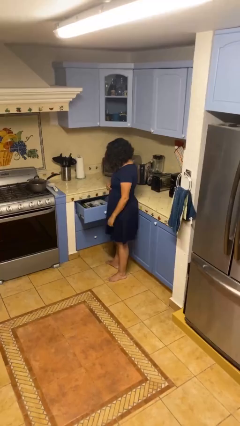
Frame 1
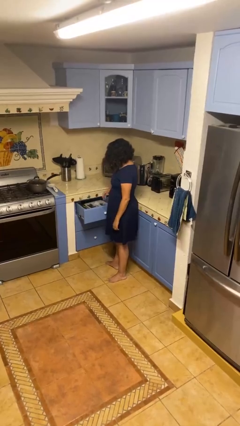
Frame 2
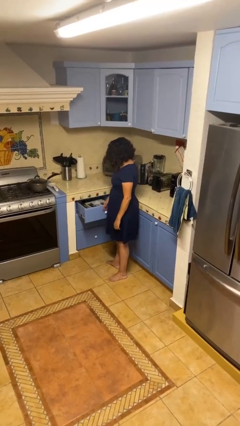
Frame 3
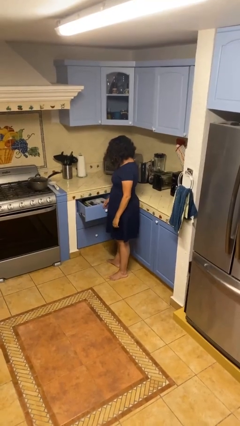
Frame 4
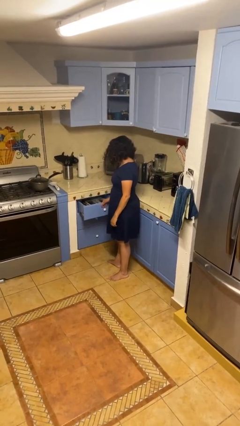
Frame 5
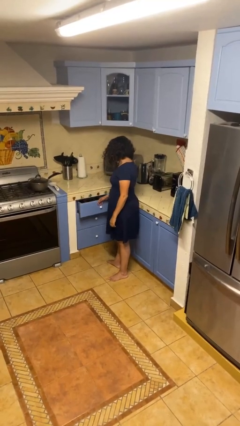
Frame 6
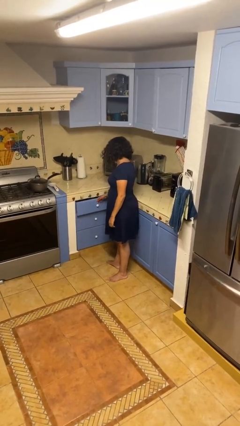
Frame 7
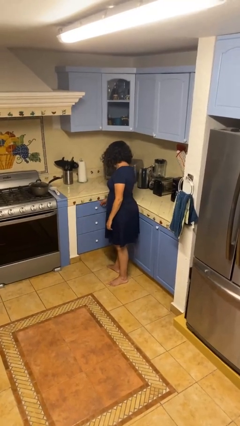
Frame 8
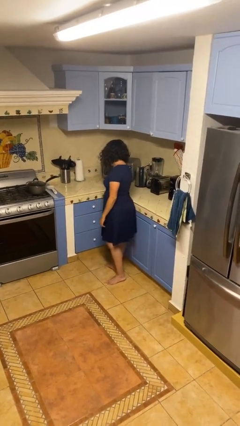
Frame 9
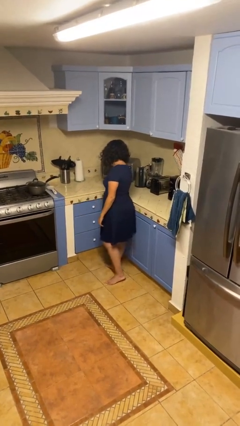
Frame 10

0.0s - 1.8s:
person closes kitchen drawer

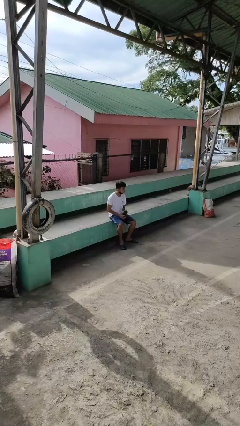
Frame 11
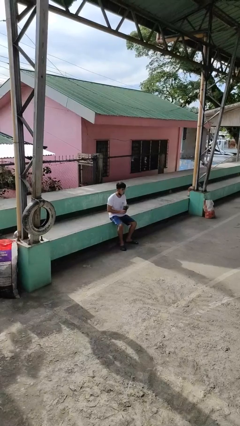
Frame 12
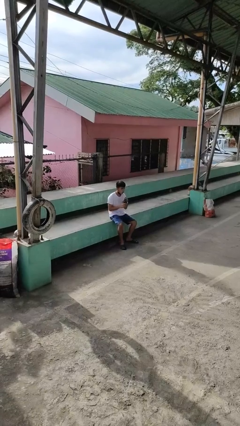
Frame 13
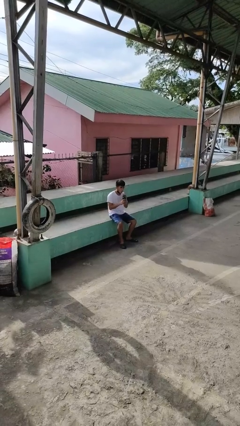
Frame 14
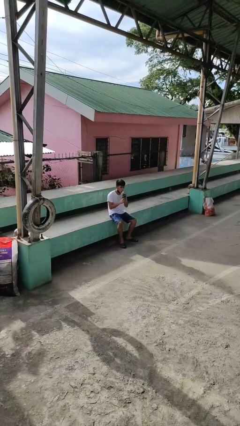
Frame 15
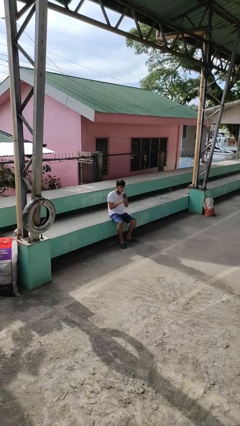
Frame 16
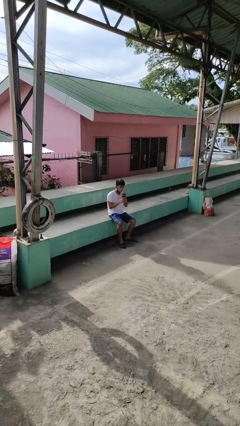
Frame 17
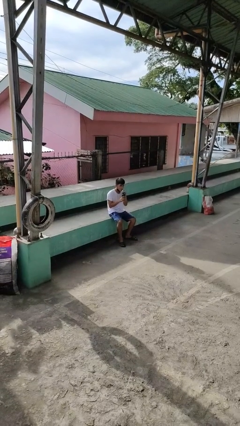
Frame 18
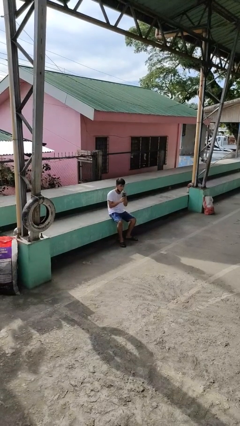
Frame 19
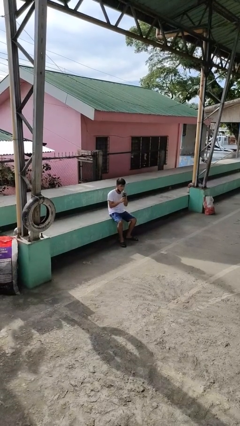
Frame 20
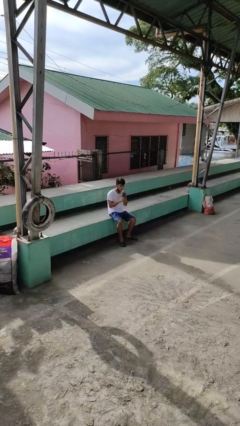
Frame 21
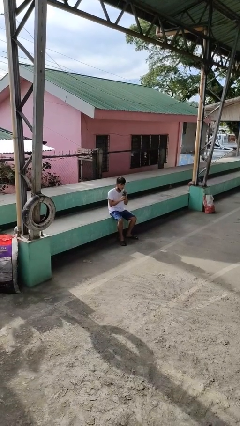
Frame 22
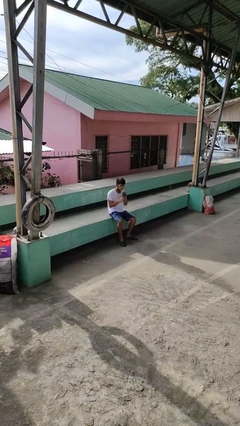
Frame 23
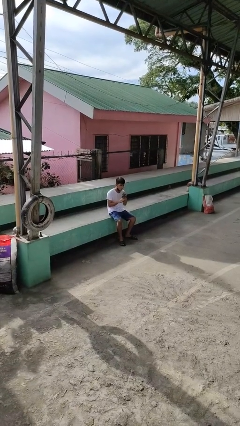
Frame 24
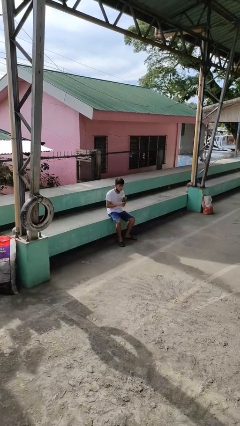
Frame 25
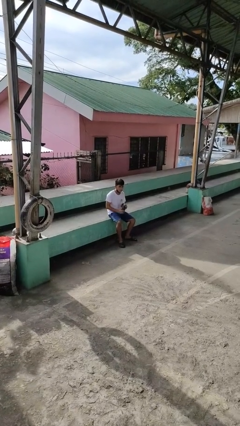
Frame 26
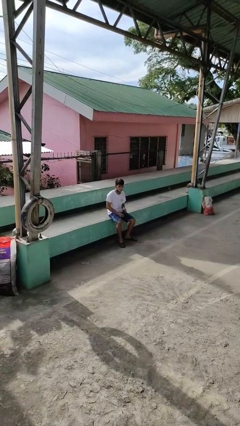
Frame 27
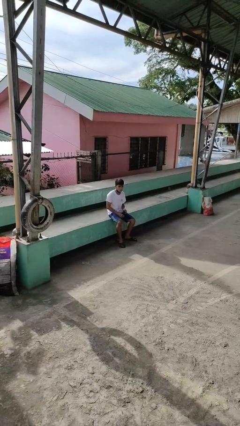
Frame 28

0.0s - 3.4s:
person drinks from straw

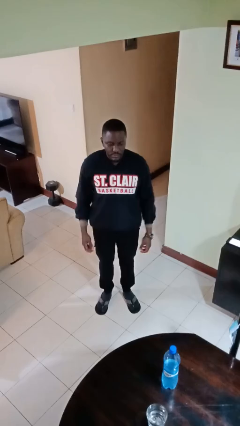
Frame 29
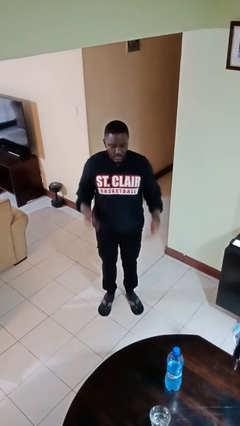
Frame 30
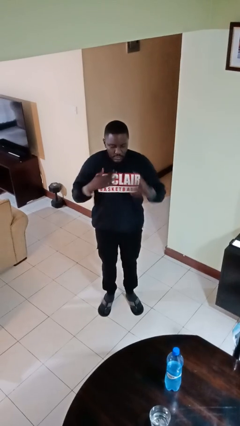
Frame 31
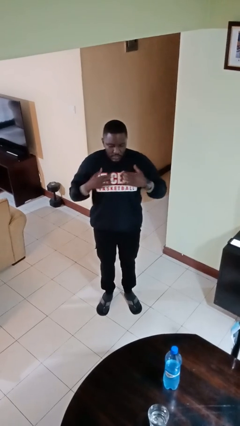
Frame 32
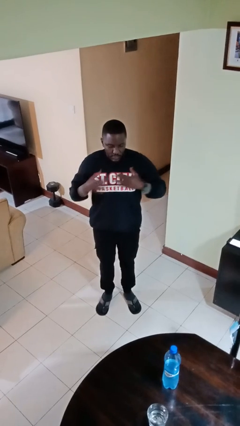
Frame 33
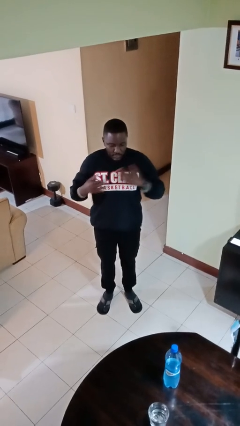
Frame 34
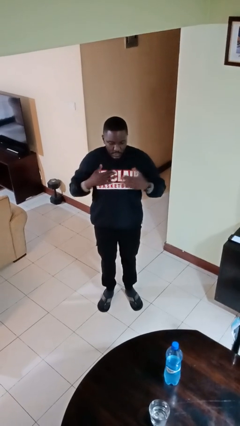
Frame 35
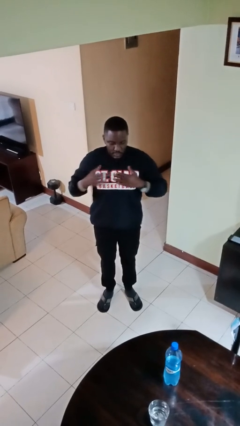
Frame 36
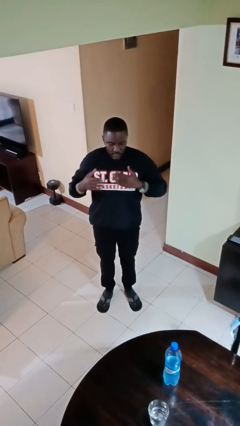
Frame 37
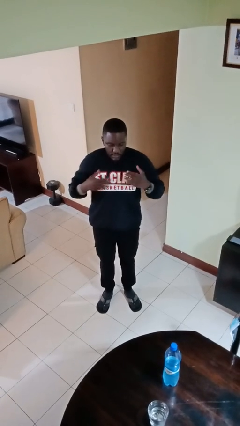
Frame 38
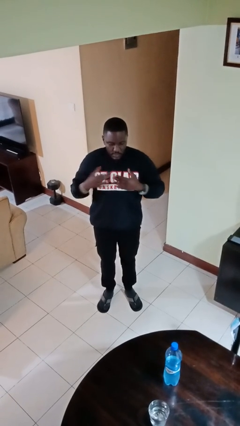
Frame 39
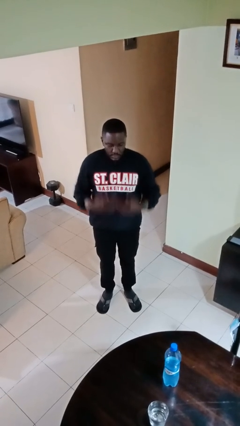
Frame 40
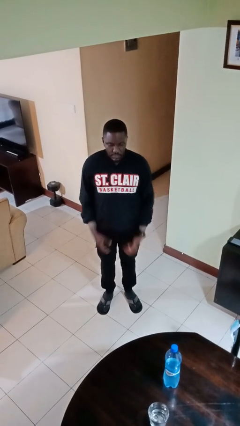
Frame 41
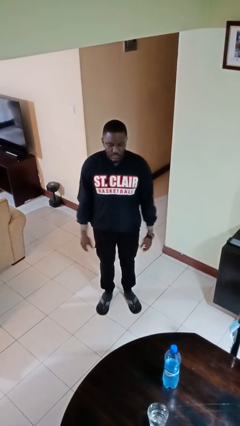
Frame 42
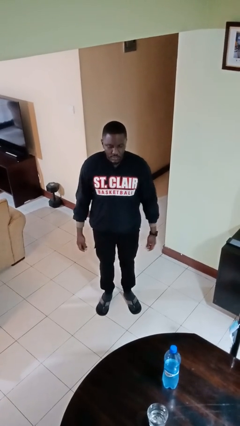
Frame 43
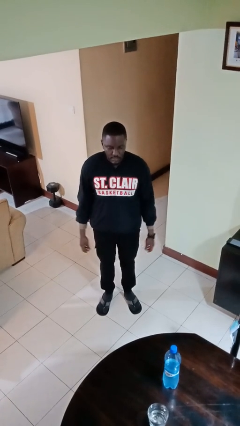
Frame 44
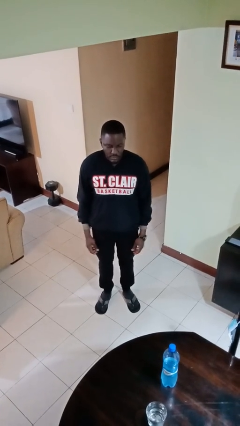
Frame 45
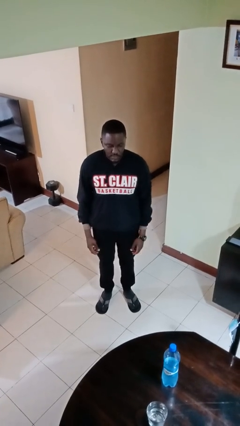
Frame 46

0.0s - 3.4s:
person drums on chest

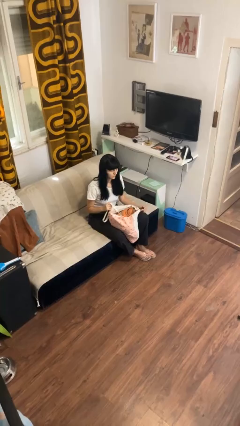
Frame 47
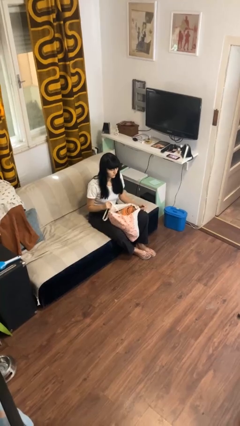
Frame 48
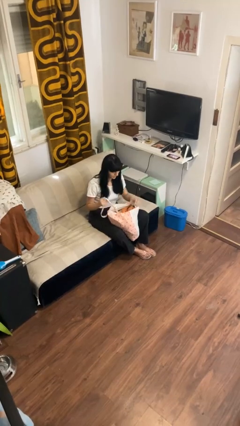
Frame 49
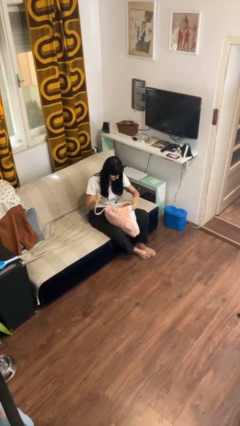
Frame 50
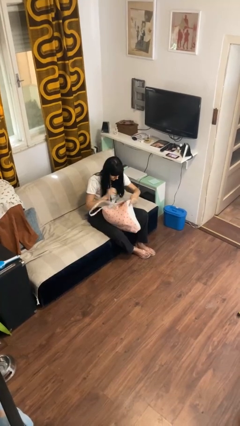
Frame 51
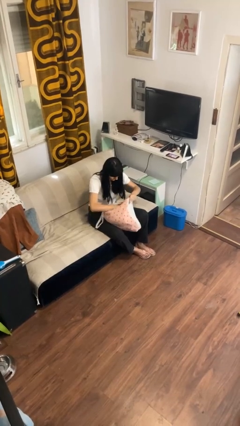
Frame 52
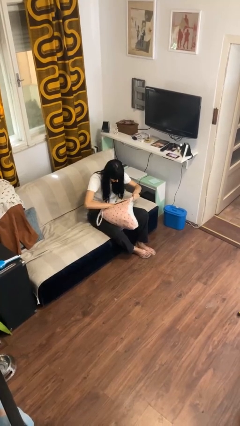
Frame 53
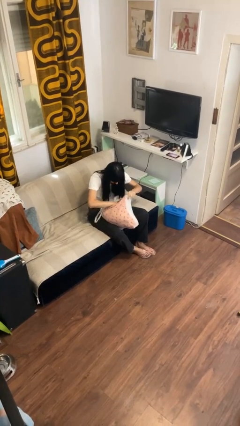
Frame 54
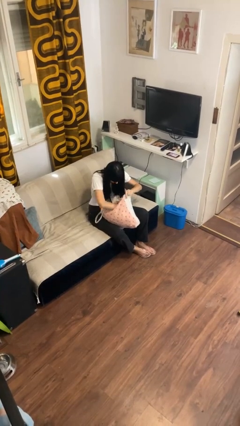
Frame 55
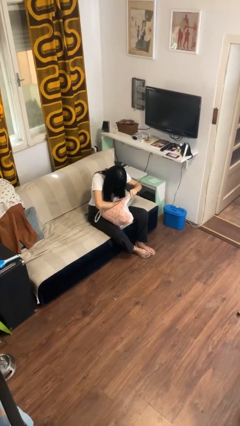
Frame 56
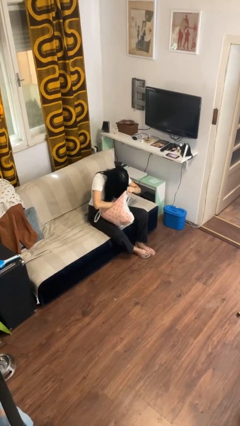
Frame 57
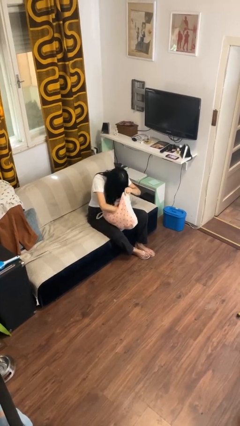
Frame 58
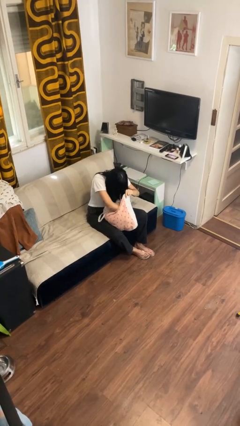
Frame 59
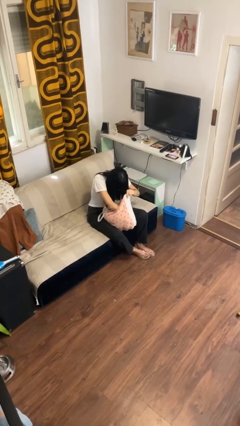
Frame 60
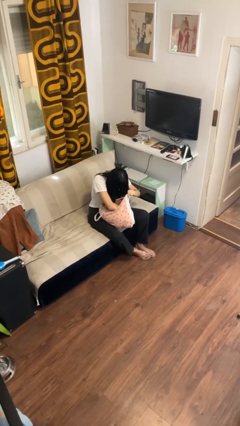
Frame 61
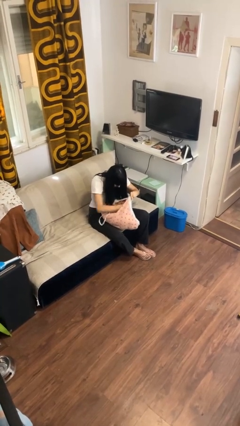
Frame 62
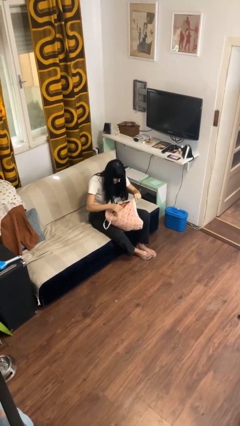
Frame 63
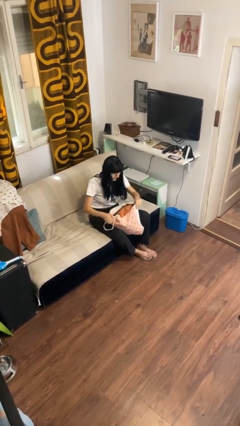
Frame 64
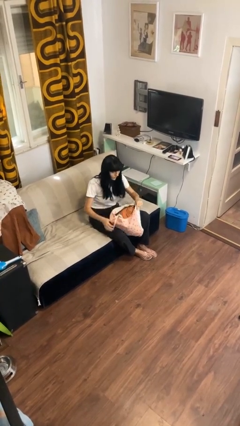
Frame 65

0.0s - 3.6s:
person searches in bag

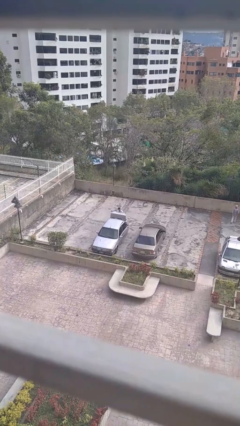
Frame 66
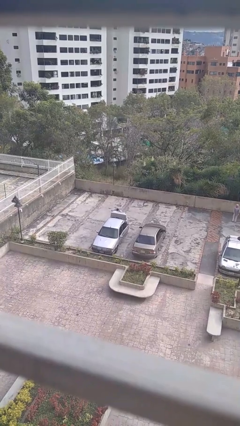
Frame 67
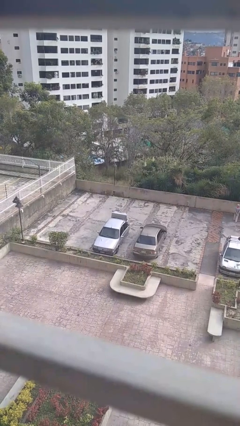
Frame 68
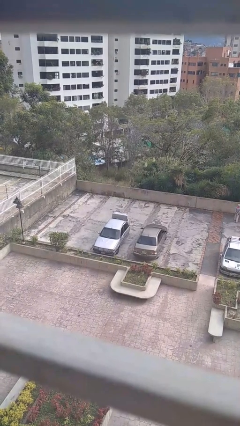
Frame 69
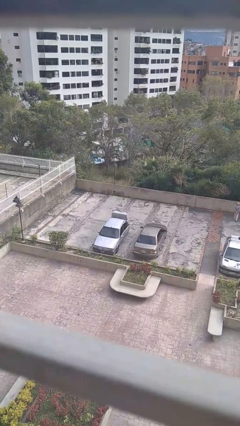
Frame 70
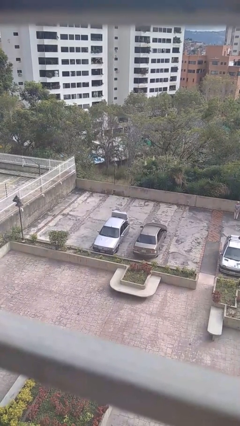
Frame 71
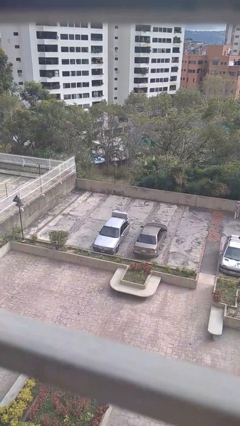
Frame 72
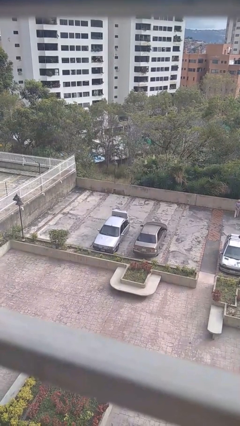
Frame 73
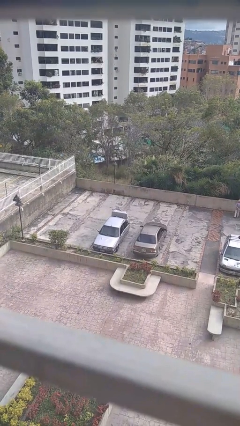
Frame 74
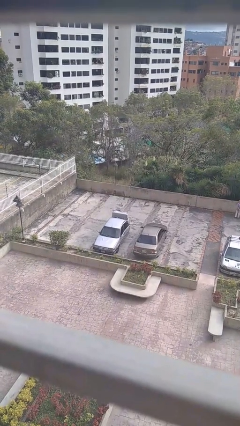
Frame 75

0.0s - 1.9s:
person loads car

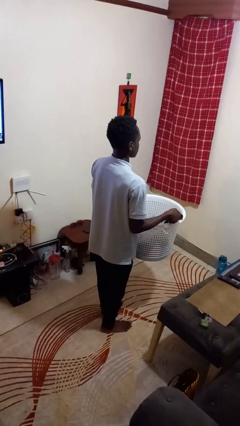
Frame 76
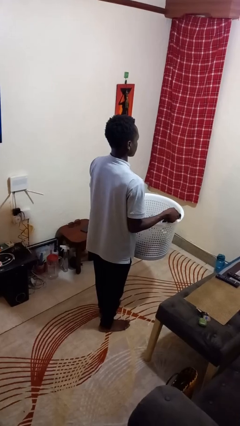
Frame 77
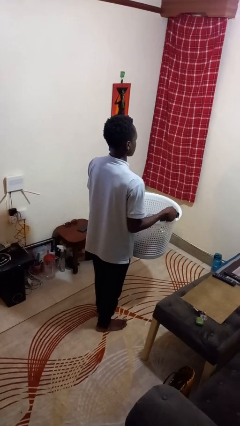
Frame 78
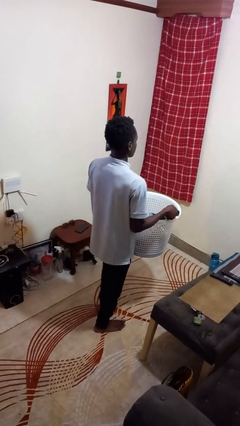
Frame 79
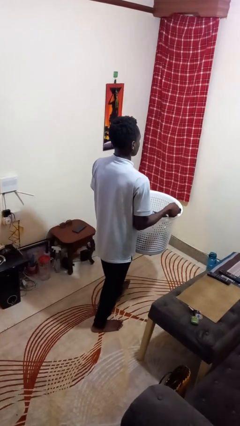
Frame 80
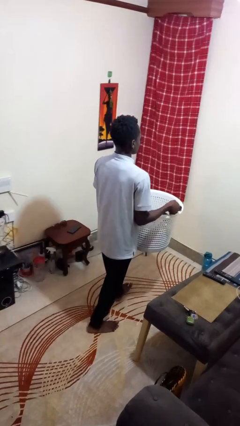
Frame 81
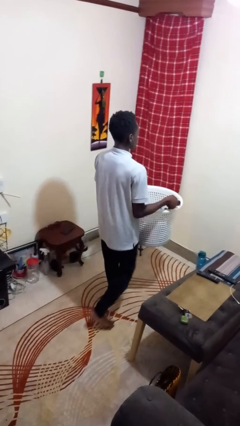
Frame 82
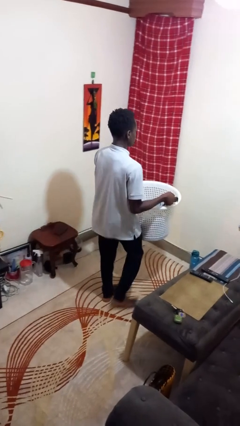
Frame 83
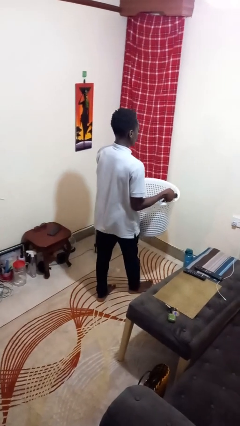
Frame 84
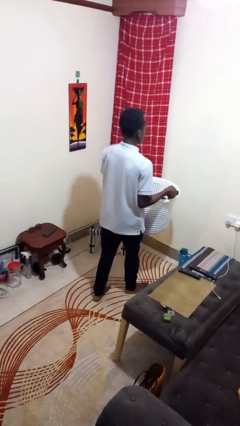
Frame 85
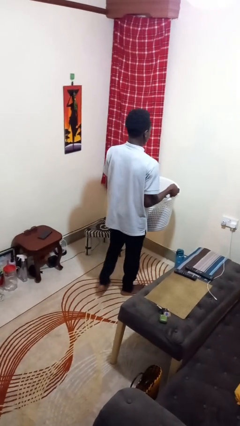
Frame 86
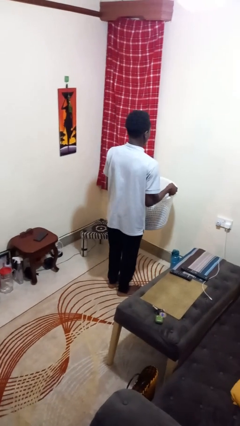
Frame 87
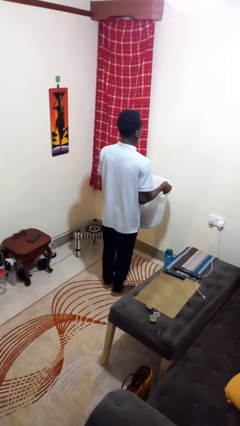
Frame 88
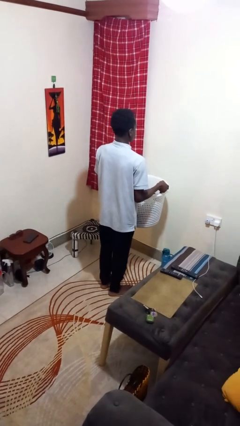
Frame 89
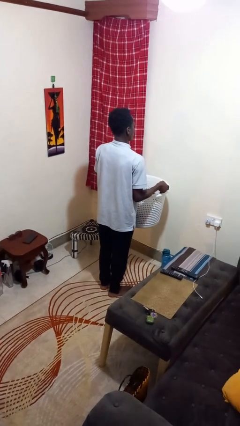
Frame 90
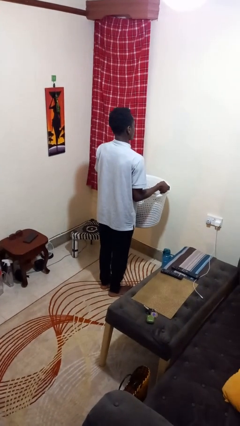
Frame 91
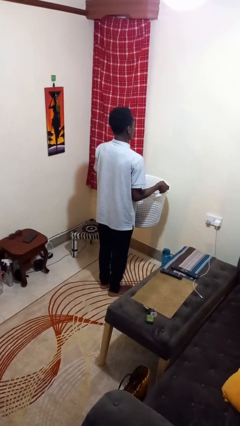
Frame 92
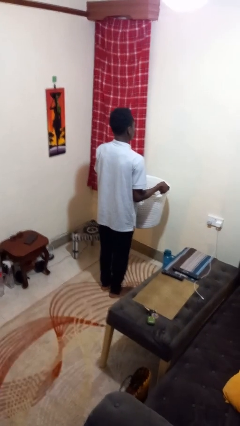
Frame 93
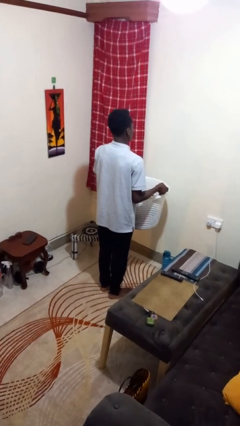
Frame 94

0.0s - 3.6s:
person carries laundry basket
